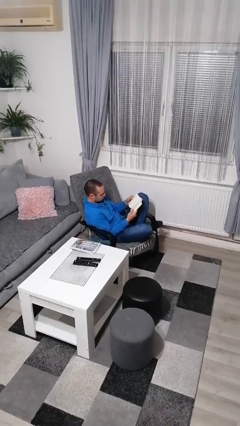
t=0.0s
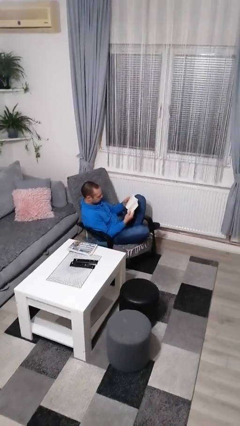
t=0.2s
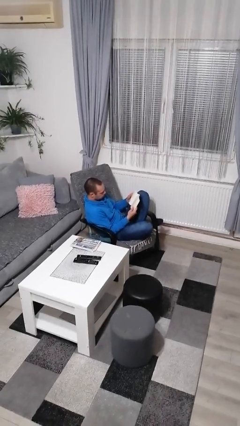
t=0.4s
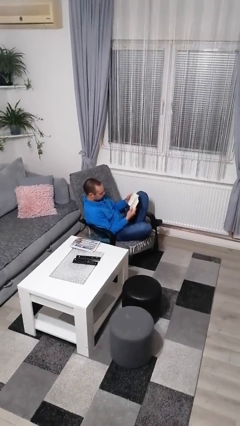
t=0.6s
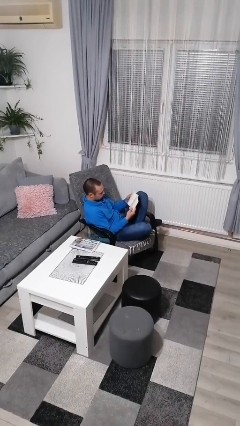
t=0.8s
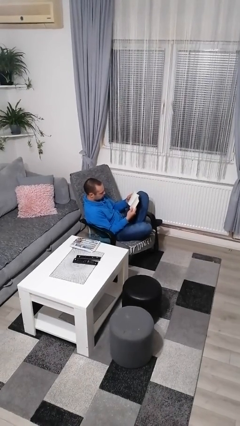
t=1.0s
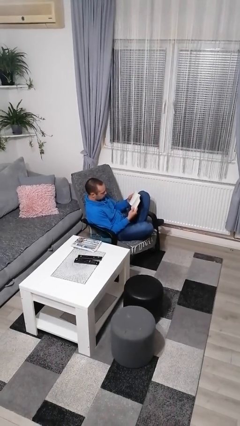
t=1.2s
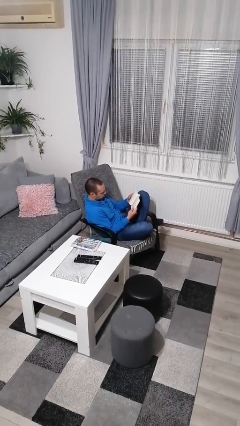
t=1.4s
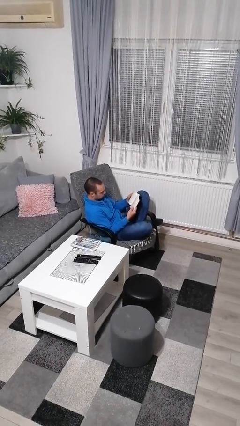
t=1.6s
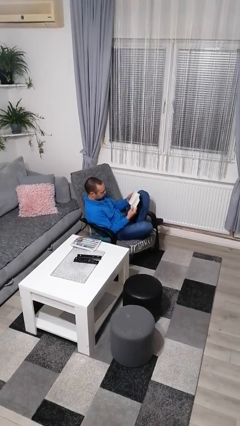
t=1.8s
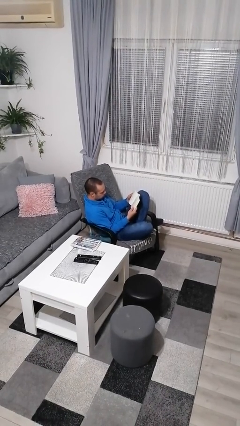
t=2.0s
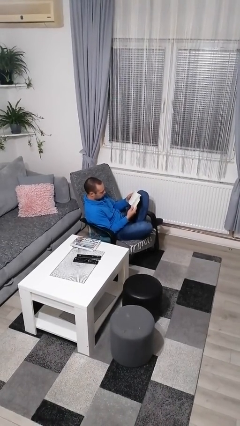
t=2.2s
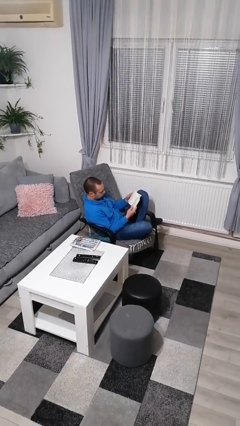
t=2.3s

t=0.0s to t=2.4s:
person reads book

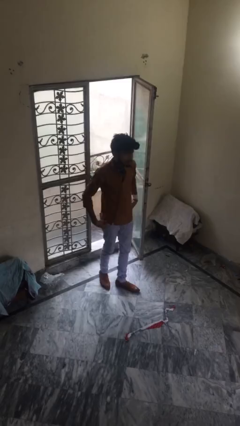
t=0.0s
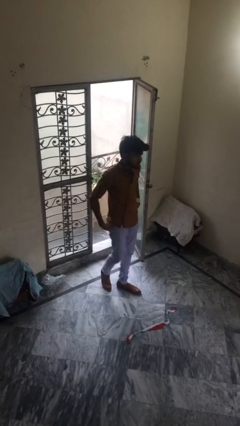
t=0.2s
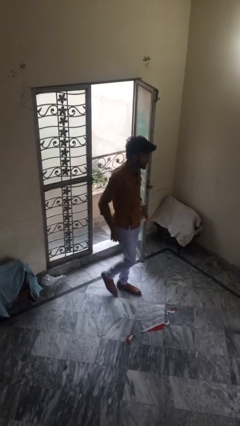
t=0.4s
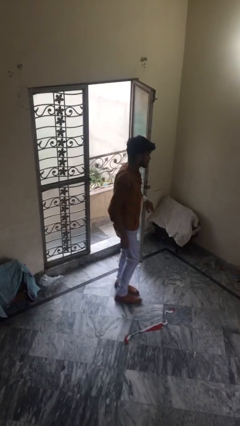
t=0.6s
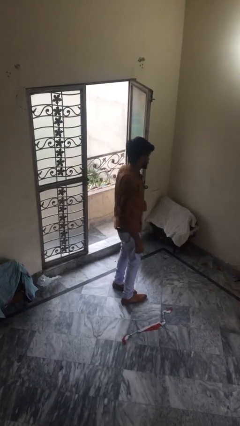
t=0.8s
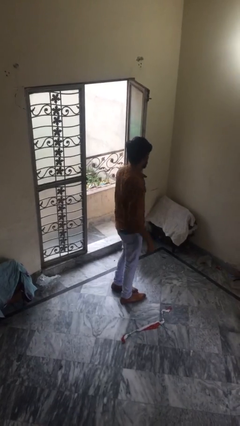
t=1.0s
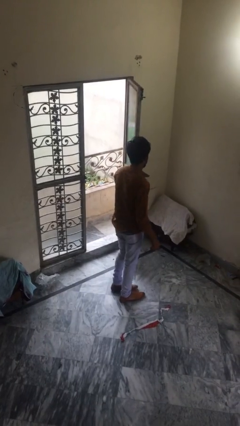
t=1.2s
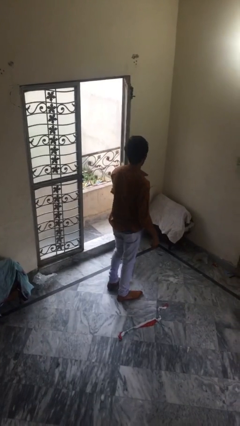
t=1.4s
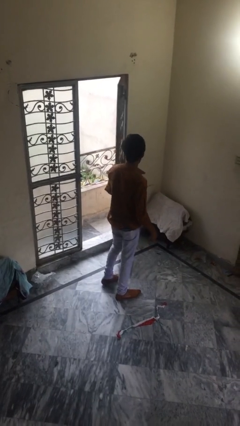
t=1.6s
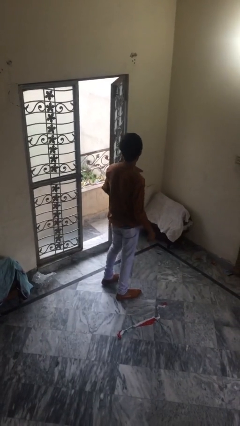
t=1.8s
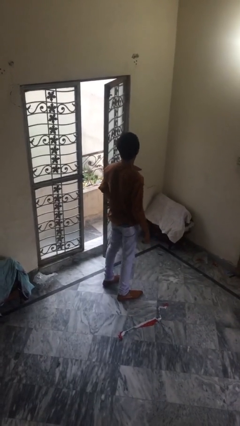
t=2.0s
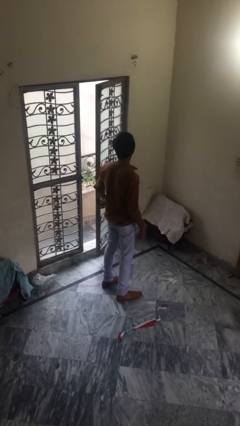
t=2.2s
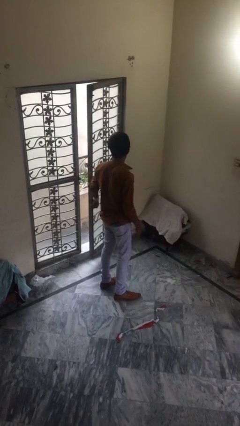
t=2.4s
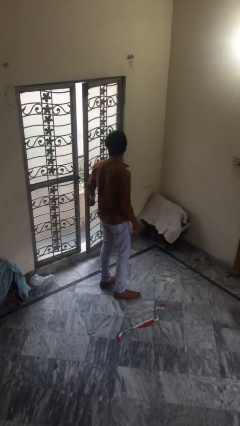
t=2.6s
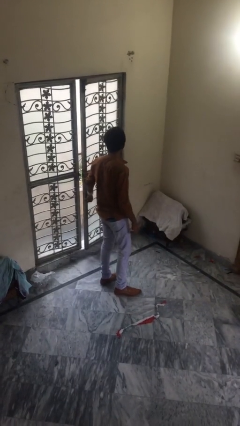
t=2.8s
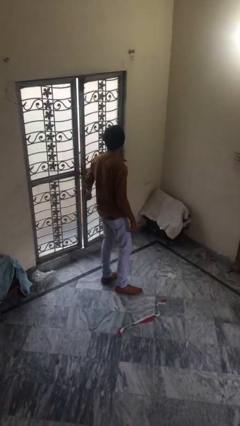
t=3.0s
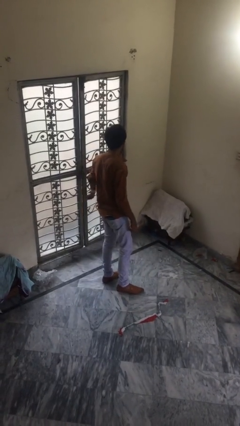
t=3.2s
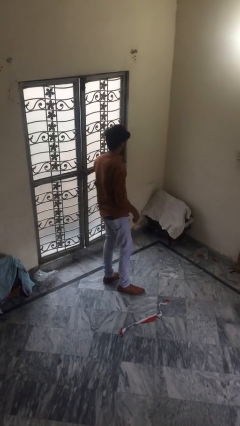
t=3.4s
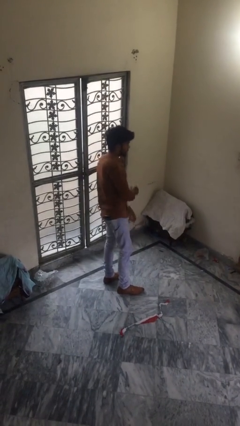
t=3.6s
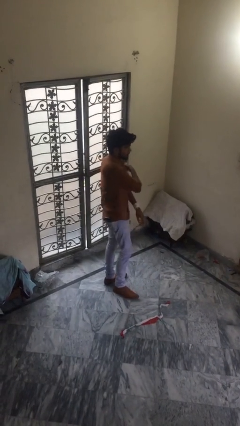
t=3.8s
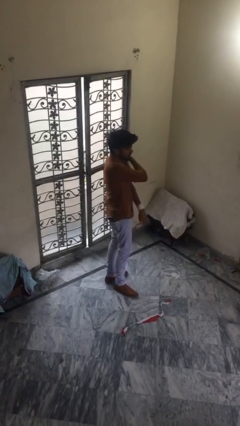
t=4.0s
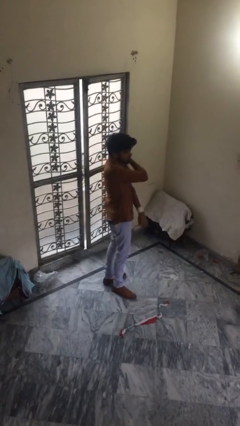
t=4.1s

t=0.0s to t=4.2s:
person closes facility door

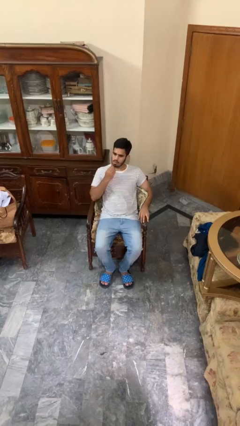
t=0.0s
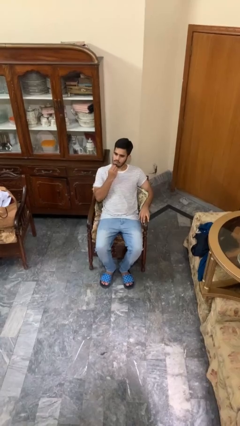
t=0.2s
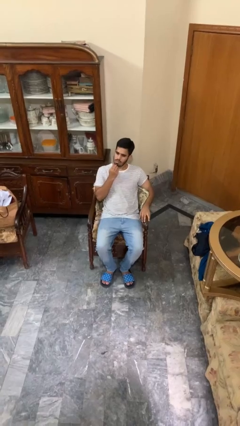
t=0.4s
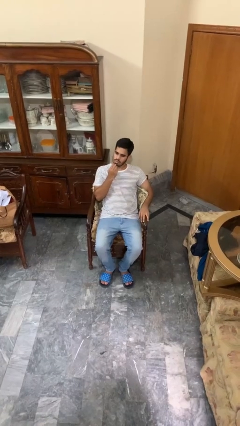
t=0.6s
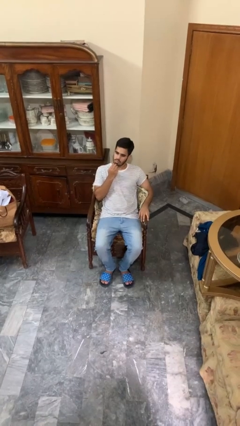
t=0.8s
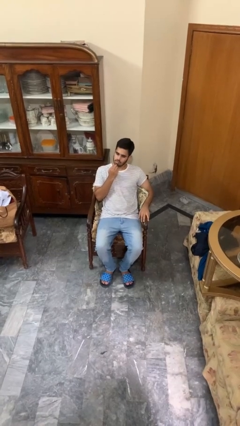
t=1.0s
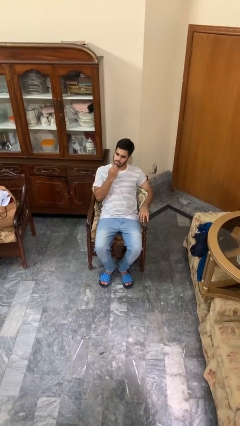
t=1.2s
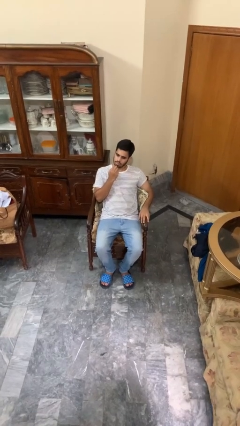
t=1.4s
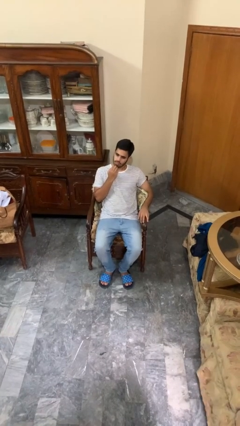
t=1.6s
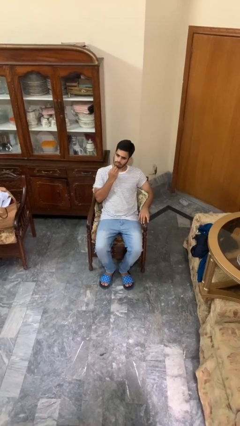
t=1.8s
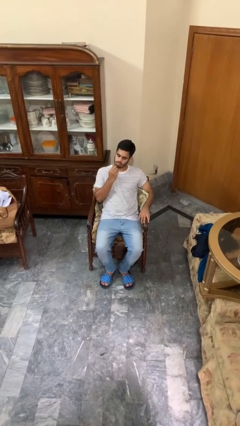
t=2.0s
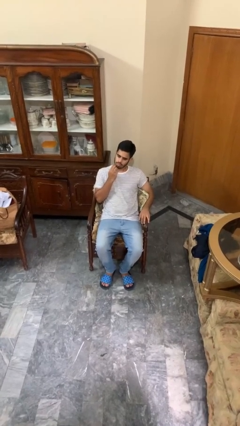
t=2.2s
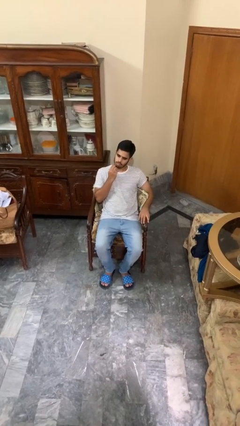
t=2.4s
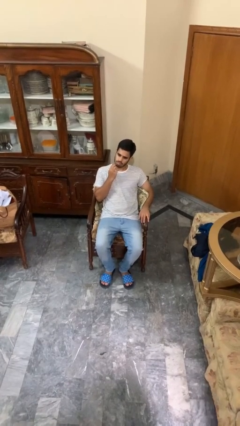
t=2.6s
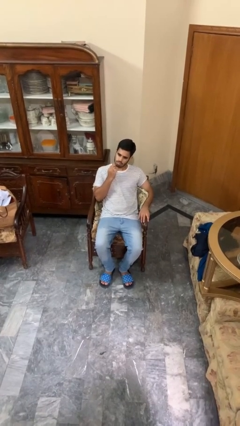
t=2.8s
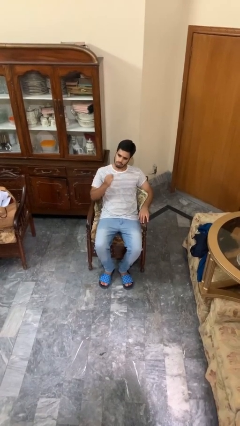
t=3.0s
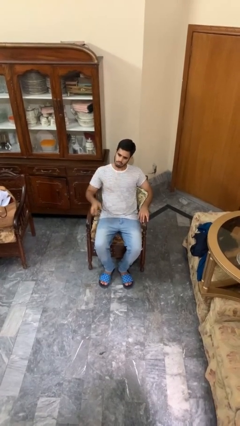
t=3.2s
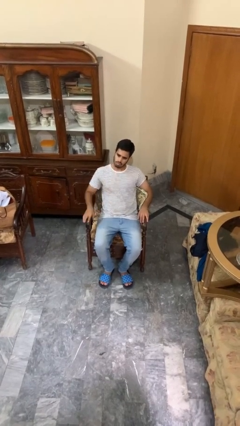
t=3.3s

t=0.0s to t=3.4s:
person strokes chin

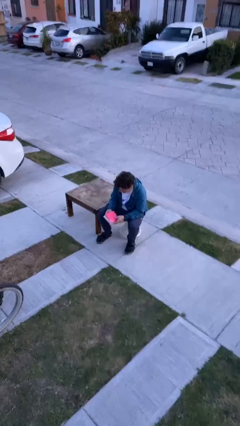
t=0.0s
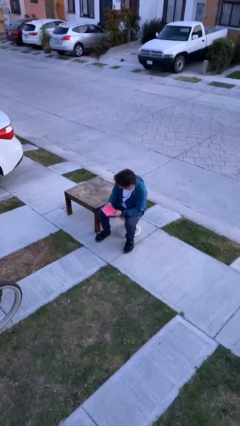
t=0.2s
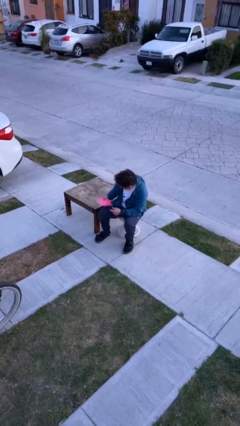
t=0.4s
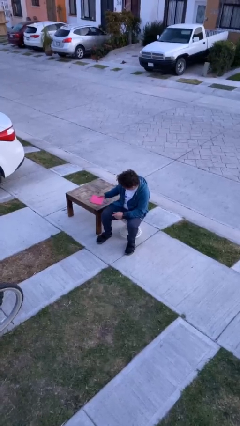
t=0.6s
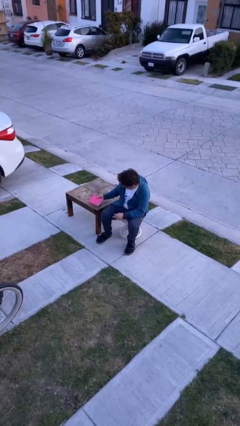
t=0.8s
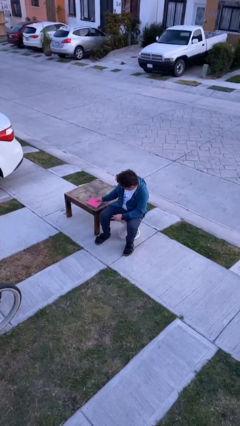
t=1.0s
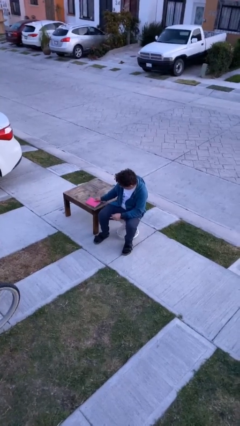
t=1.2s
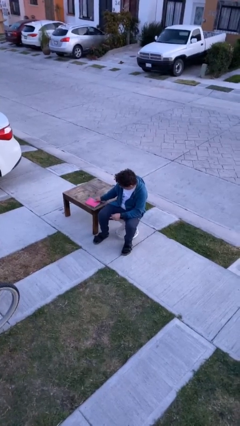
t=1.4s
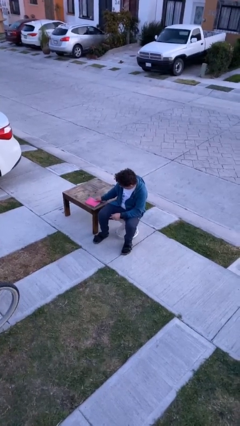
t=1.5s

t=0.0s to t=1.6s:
person puts down object on table

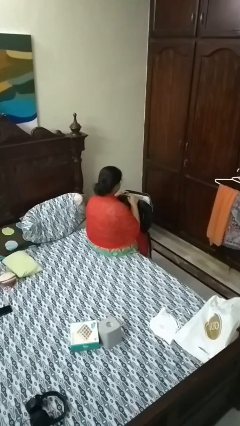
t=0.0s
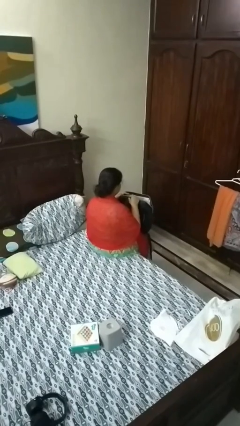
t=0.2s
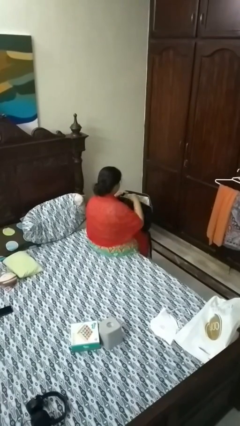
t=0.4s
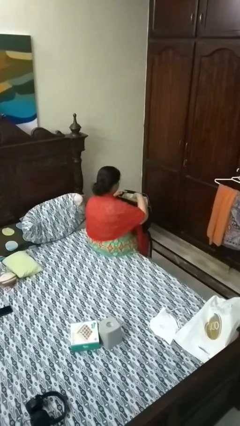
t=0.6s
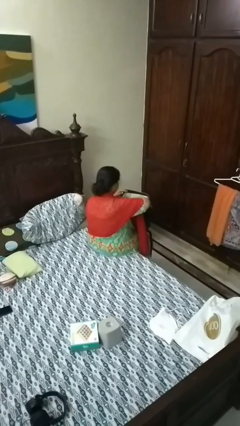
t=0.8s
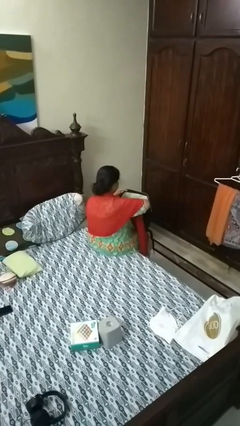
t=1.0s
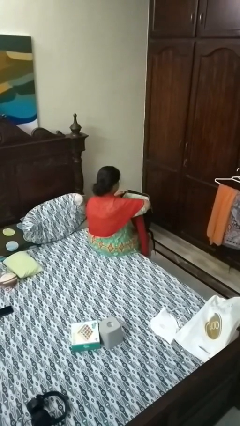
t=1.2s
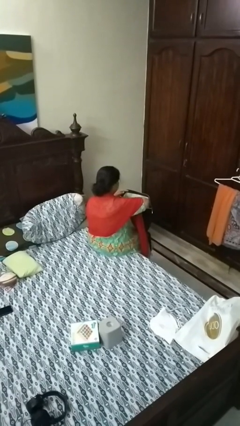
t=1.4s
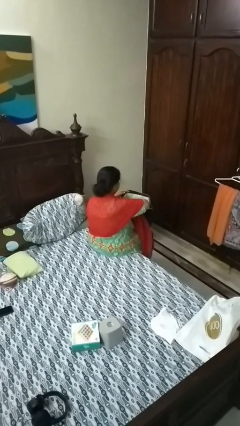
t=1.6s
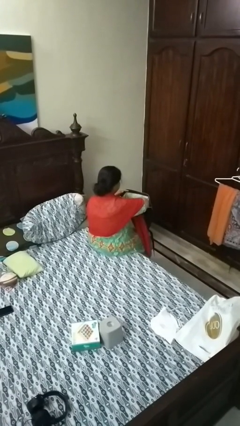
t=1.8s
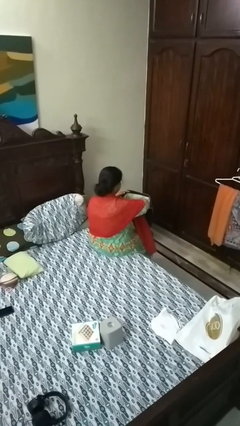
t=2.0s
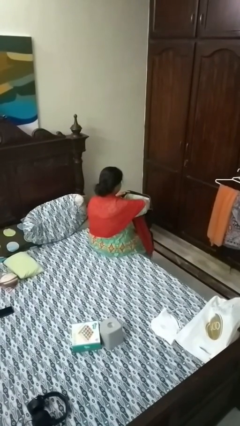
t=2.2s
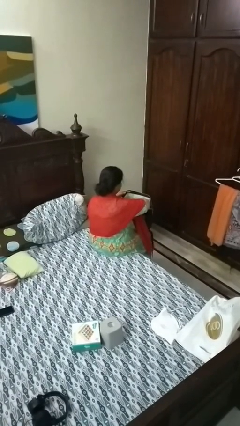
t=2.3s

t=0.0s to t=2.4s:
person searches in backpack

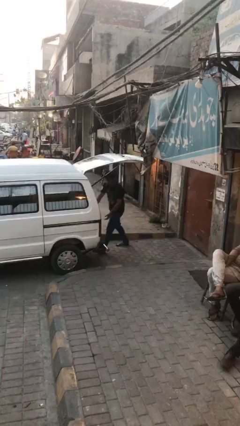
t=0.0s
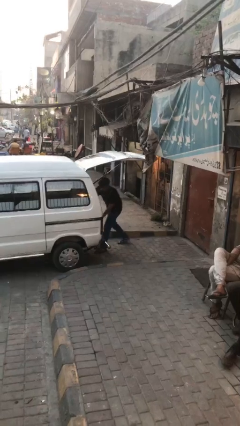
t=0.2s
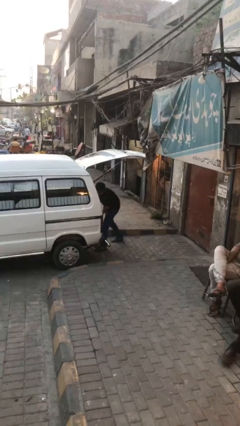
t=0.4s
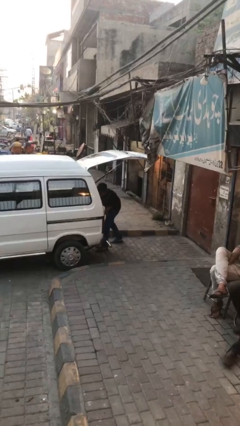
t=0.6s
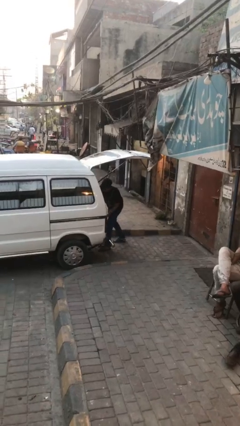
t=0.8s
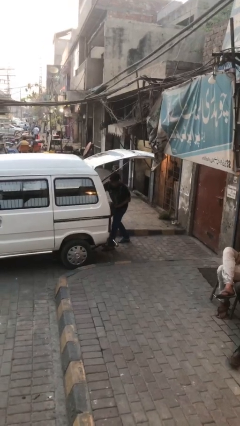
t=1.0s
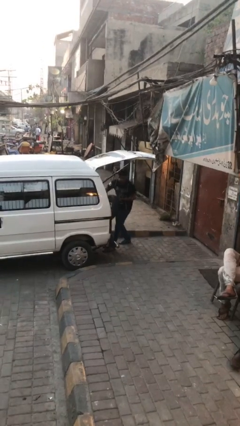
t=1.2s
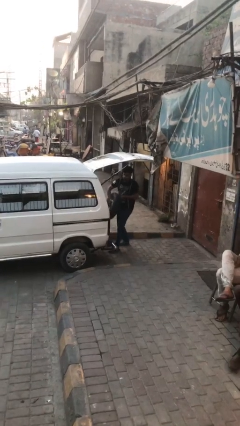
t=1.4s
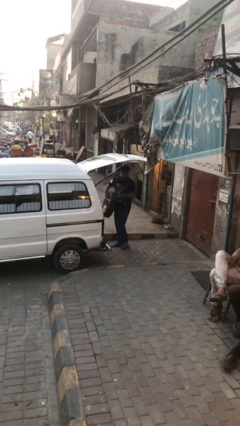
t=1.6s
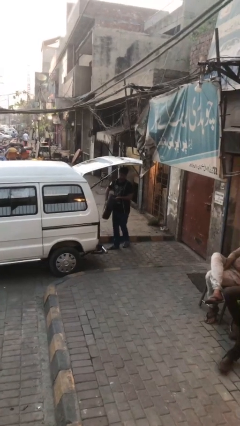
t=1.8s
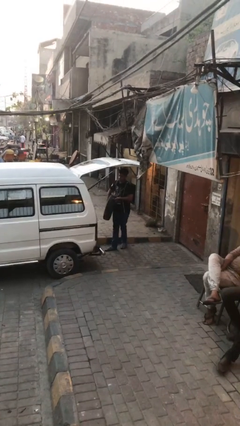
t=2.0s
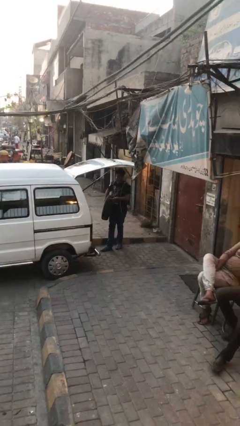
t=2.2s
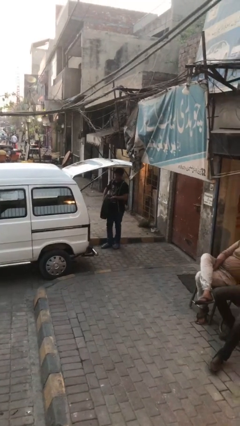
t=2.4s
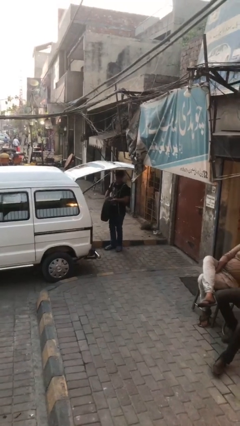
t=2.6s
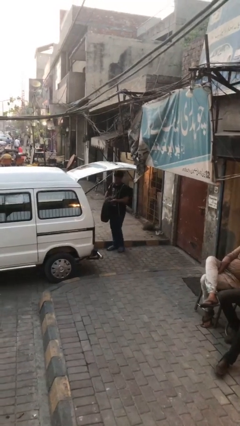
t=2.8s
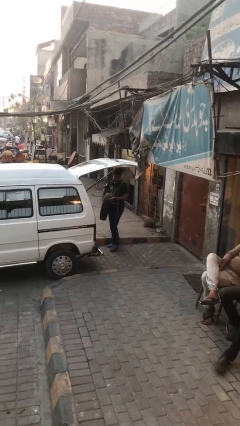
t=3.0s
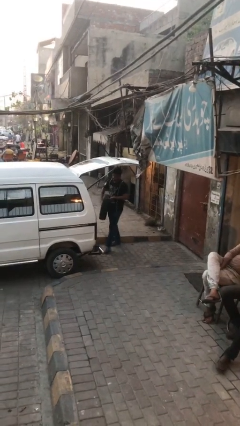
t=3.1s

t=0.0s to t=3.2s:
person unloads car

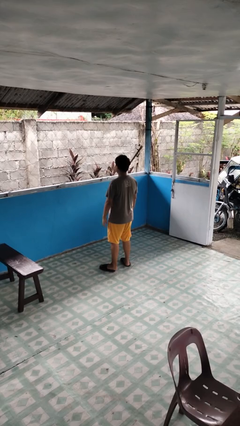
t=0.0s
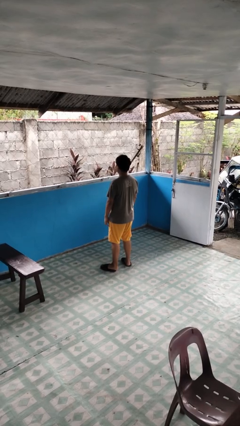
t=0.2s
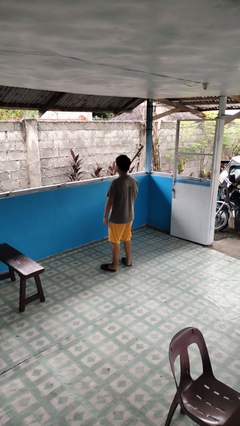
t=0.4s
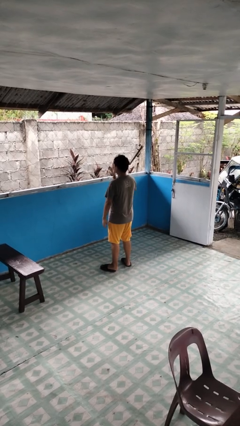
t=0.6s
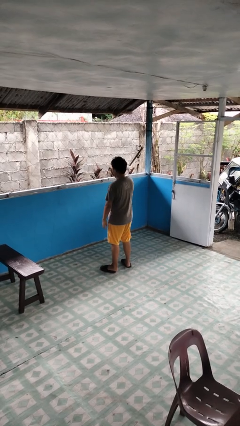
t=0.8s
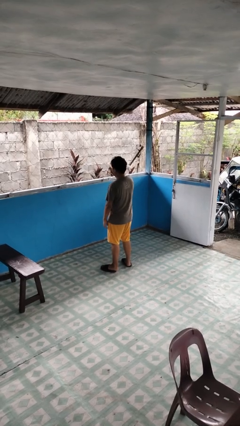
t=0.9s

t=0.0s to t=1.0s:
person gestures stop
